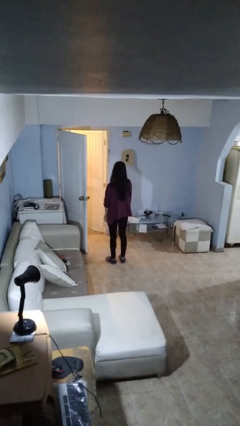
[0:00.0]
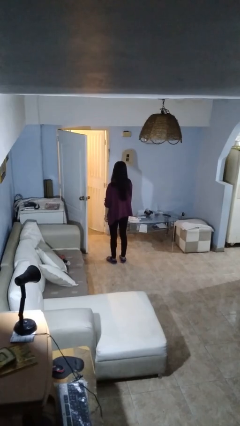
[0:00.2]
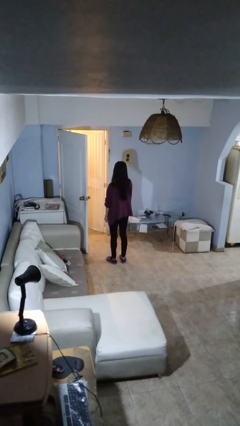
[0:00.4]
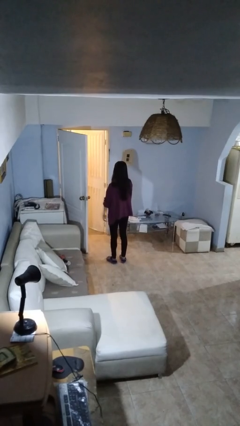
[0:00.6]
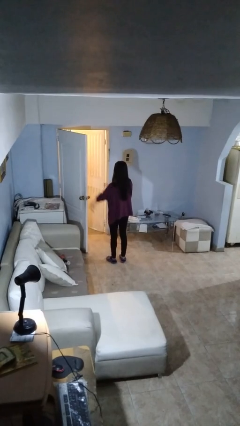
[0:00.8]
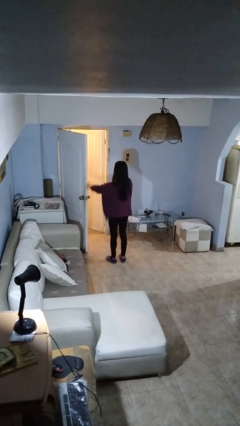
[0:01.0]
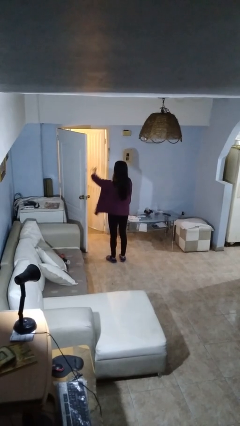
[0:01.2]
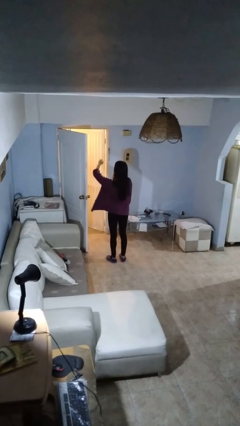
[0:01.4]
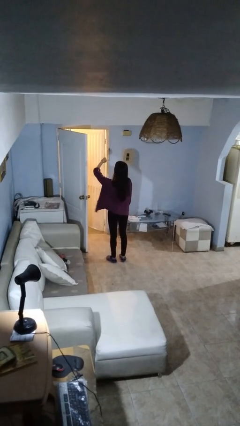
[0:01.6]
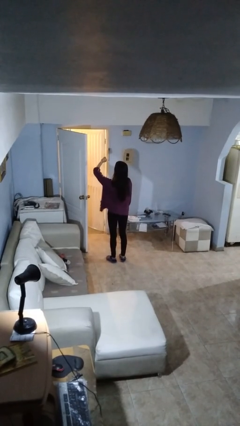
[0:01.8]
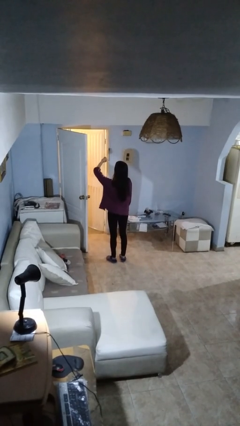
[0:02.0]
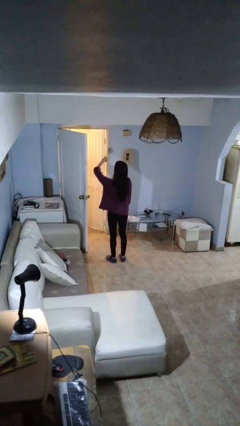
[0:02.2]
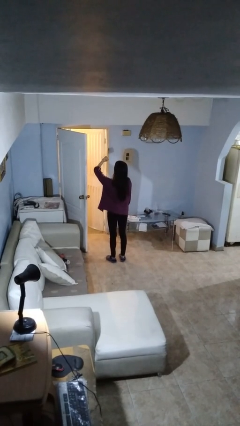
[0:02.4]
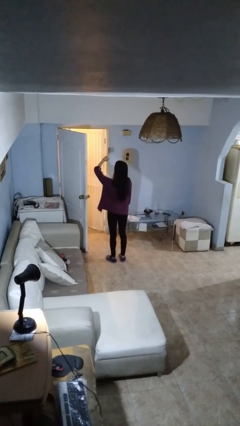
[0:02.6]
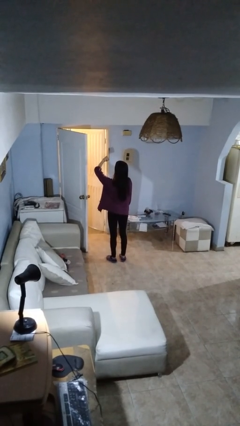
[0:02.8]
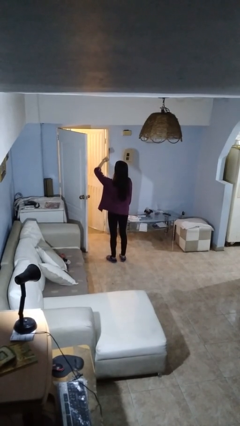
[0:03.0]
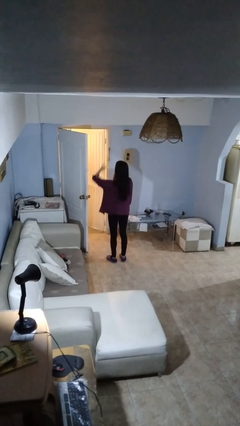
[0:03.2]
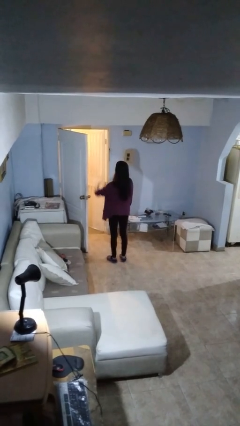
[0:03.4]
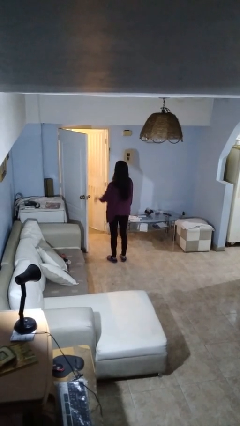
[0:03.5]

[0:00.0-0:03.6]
person looks at wristwatch

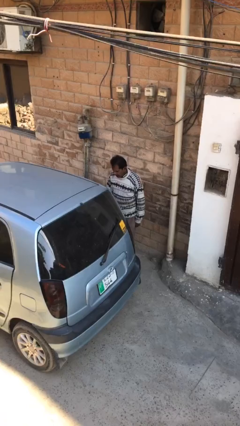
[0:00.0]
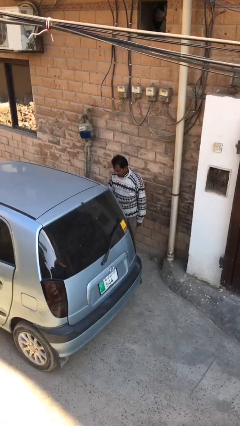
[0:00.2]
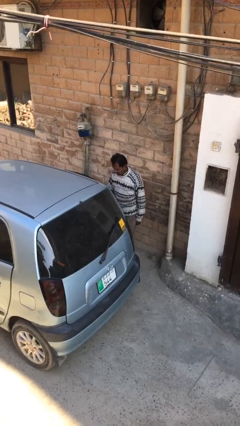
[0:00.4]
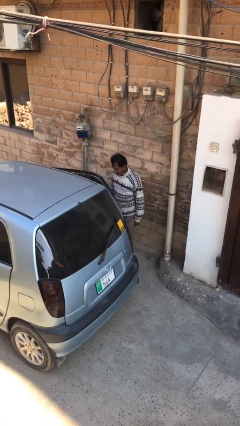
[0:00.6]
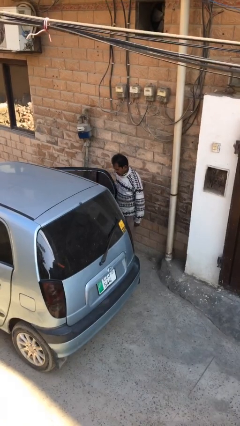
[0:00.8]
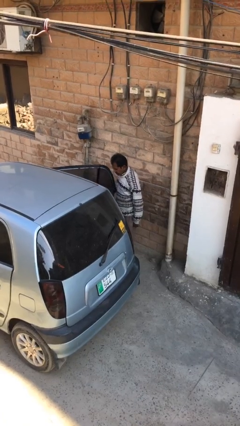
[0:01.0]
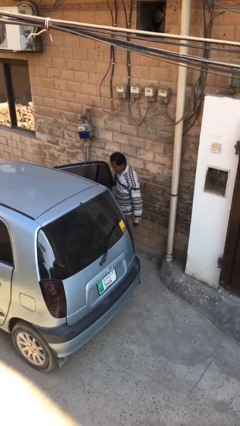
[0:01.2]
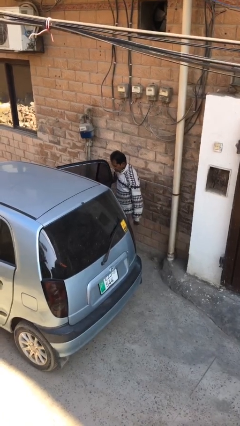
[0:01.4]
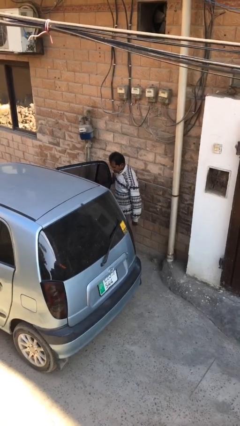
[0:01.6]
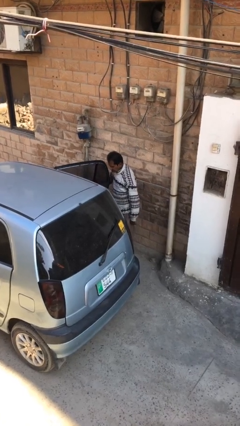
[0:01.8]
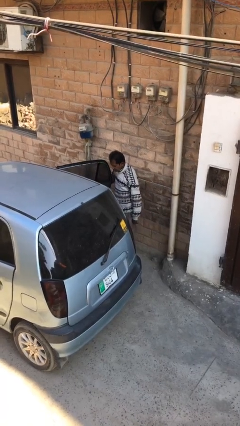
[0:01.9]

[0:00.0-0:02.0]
person opens car door

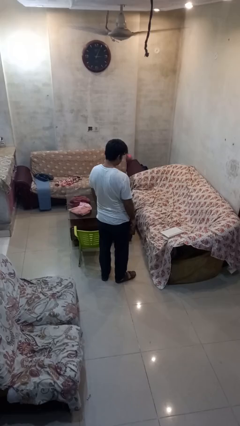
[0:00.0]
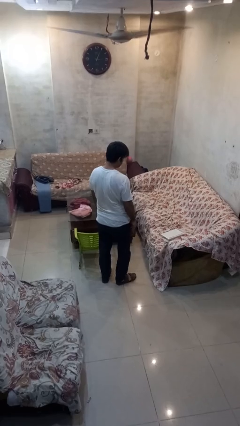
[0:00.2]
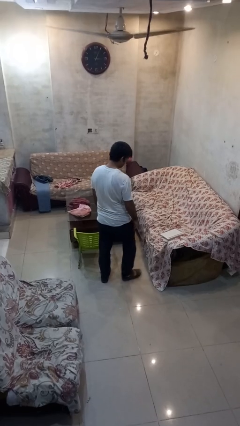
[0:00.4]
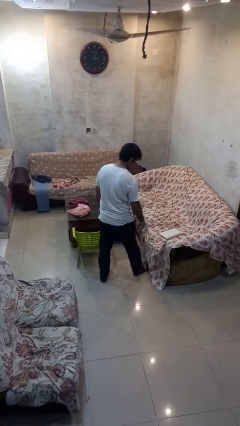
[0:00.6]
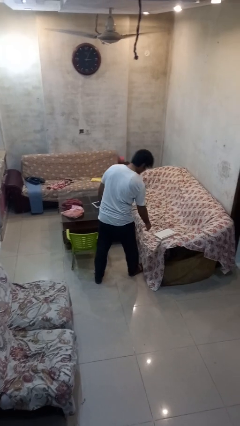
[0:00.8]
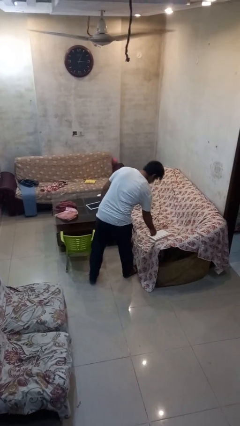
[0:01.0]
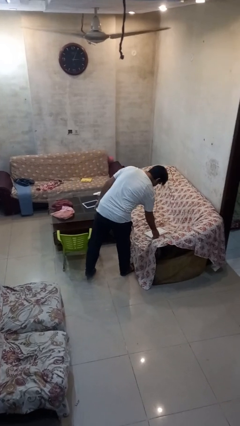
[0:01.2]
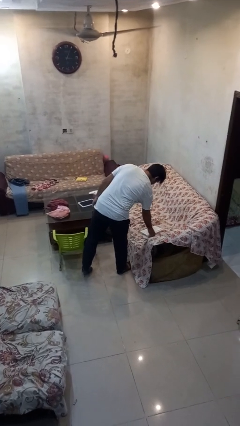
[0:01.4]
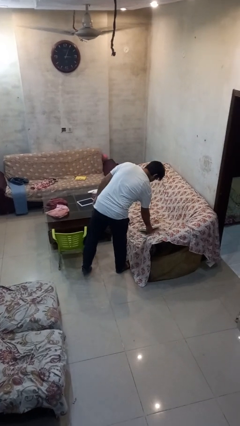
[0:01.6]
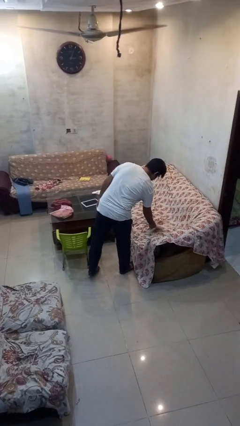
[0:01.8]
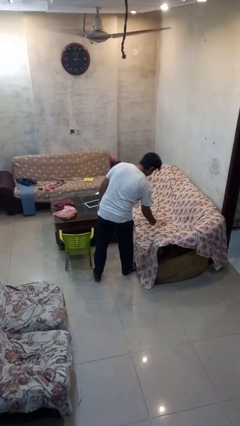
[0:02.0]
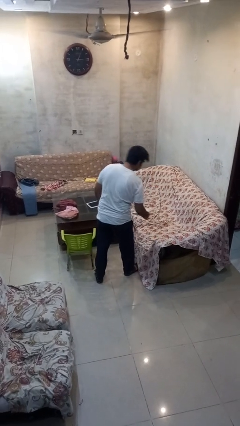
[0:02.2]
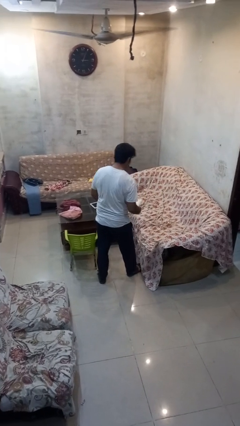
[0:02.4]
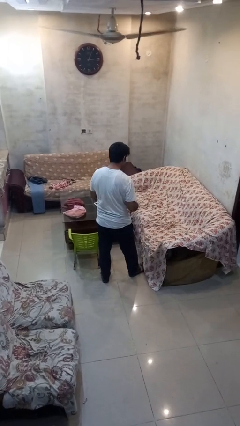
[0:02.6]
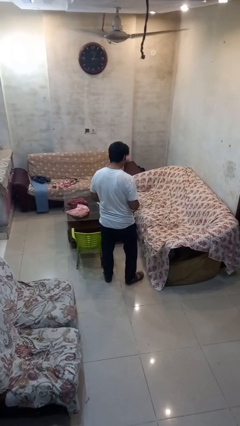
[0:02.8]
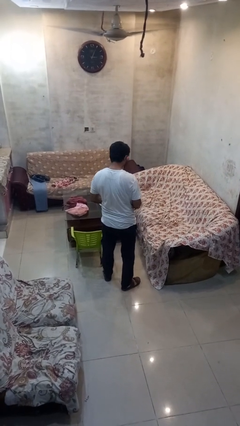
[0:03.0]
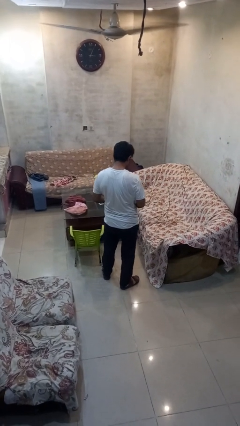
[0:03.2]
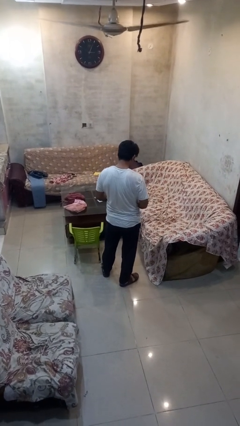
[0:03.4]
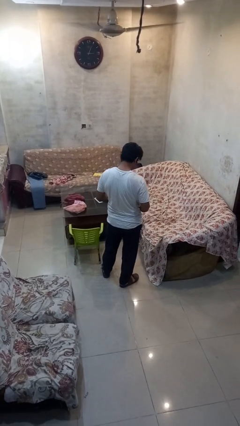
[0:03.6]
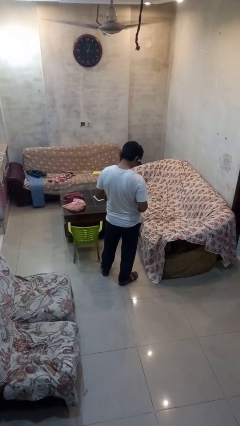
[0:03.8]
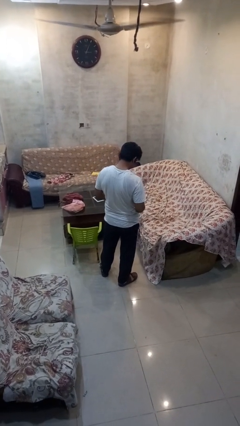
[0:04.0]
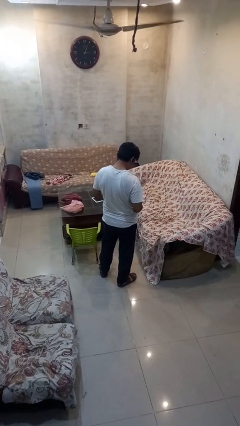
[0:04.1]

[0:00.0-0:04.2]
person picks up object from couch

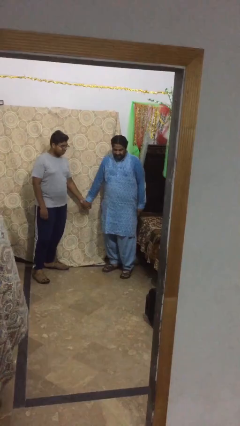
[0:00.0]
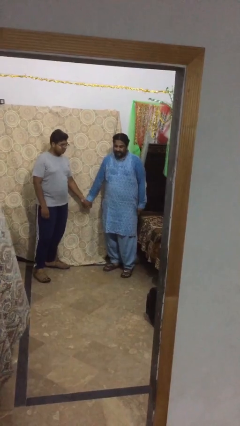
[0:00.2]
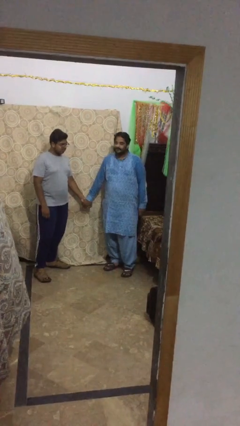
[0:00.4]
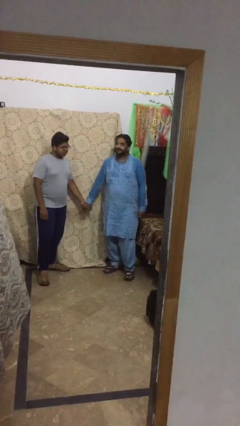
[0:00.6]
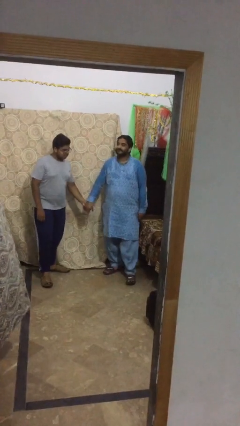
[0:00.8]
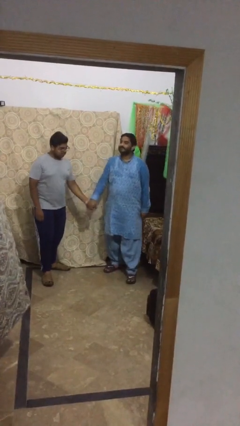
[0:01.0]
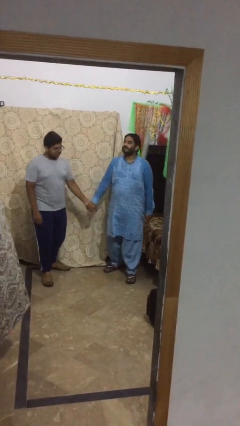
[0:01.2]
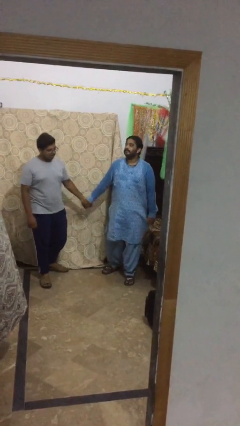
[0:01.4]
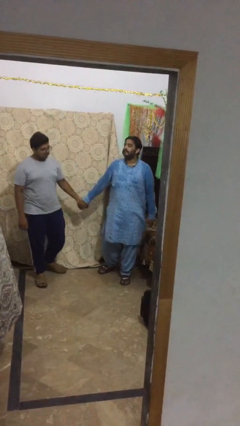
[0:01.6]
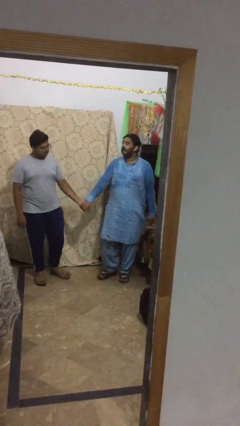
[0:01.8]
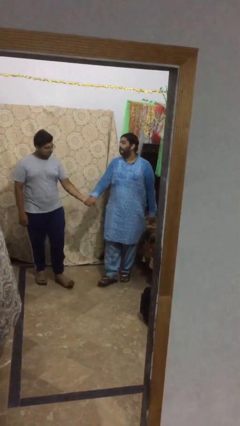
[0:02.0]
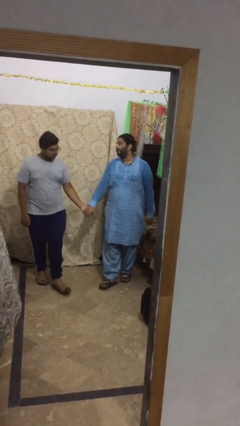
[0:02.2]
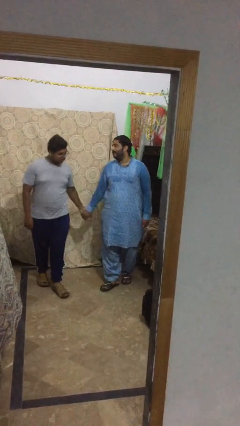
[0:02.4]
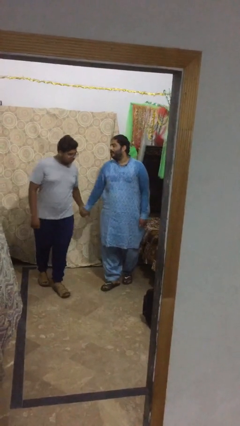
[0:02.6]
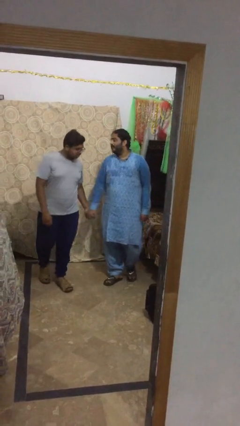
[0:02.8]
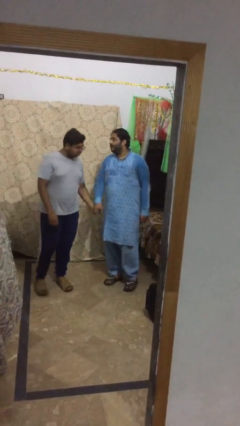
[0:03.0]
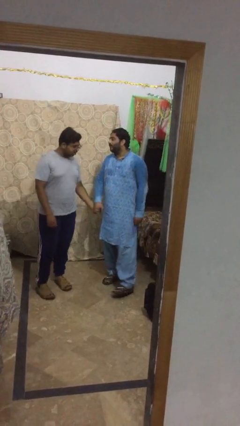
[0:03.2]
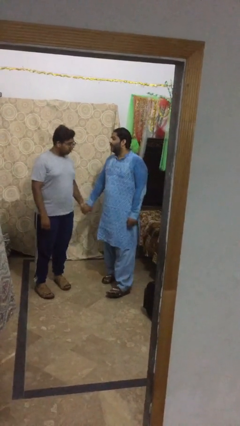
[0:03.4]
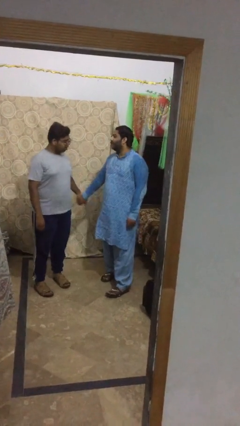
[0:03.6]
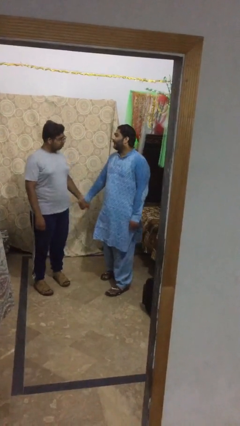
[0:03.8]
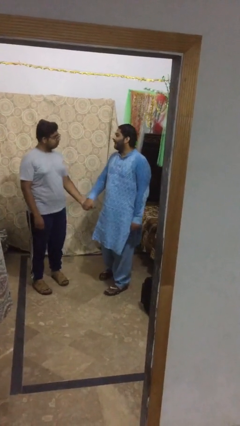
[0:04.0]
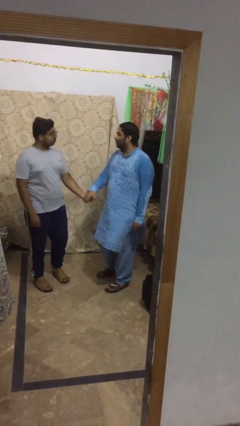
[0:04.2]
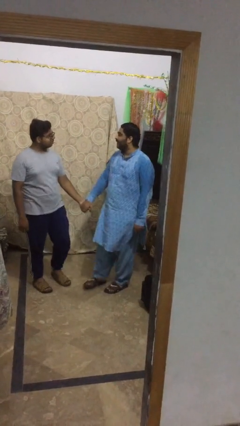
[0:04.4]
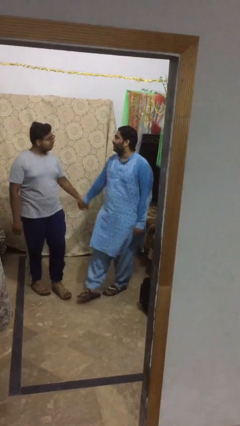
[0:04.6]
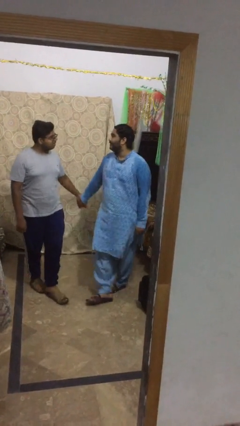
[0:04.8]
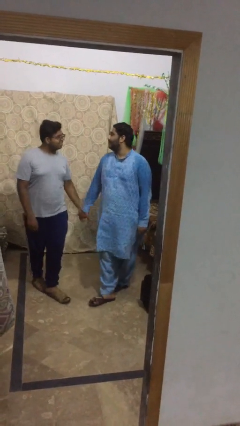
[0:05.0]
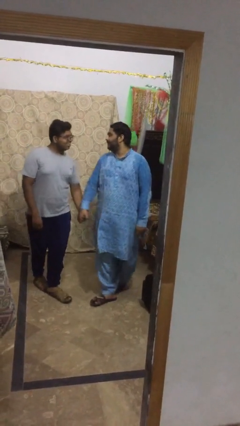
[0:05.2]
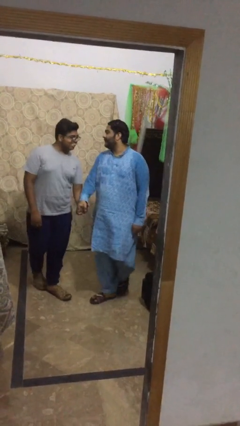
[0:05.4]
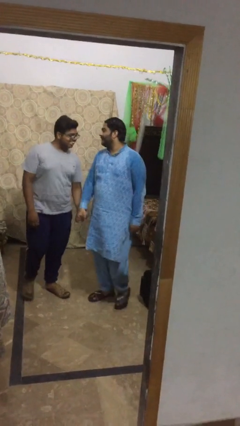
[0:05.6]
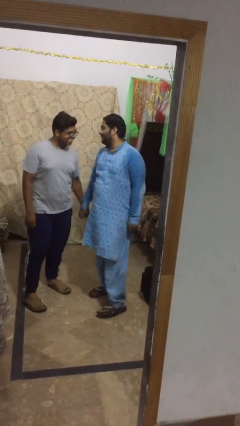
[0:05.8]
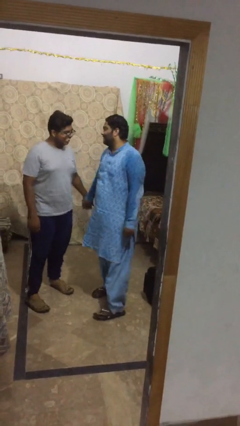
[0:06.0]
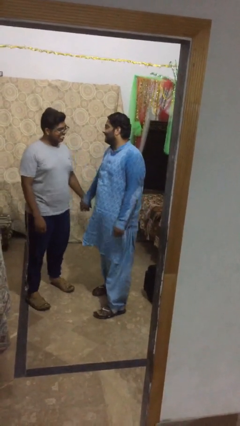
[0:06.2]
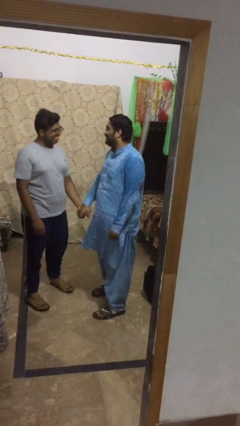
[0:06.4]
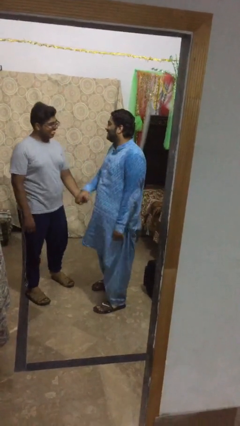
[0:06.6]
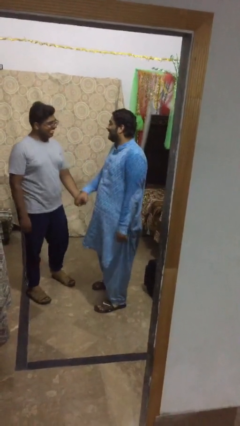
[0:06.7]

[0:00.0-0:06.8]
person holds hand

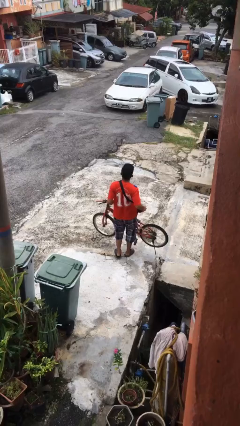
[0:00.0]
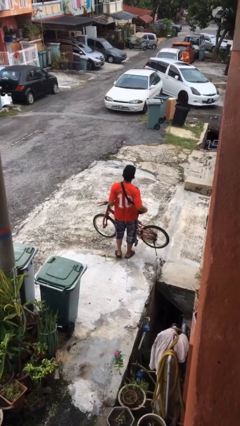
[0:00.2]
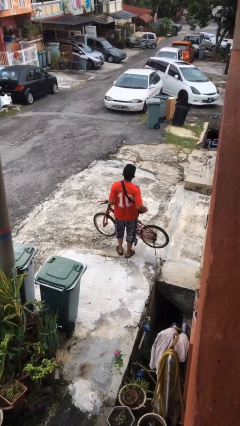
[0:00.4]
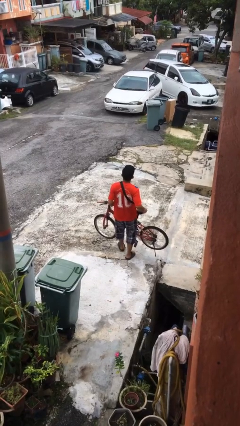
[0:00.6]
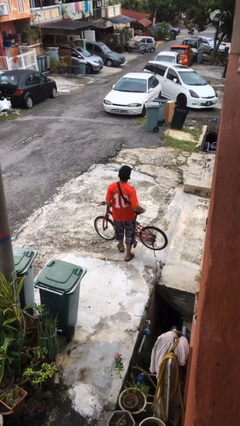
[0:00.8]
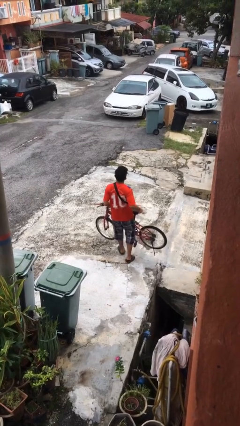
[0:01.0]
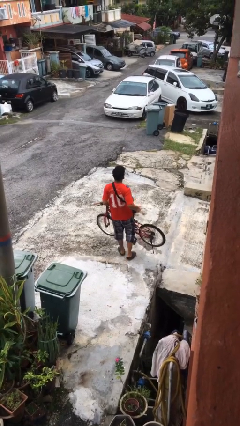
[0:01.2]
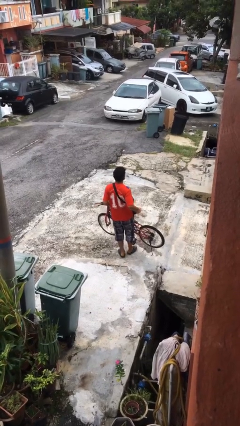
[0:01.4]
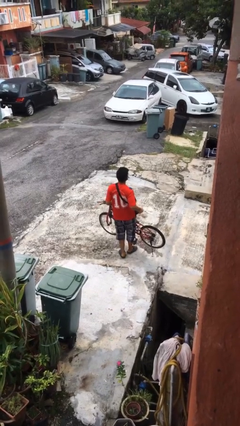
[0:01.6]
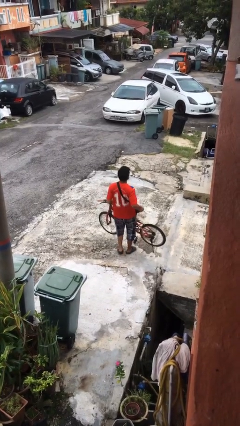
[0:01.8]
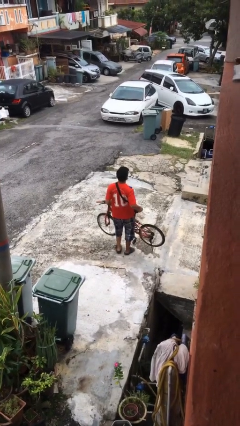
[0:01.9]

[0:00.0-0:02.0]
person carries bicycle
